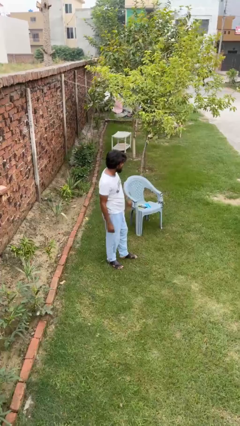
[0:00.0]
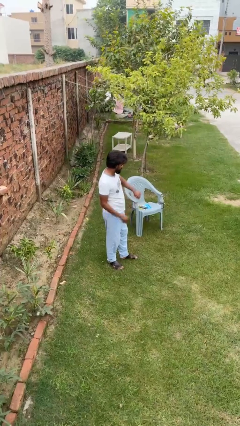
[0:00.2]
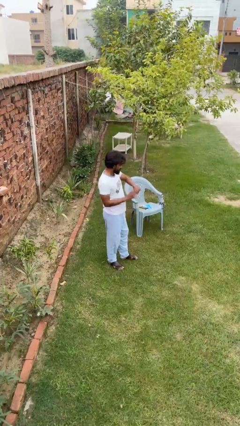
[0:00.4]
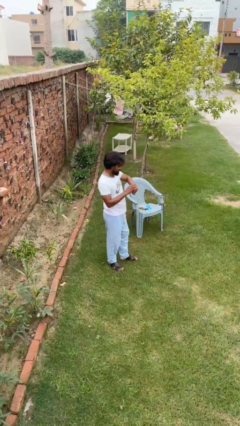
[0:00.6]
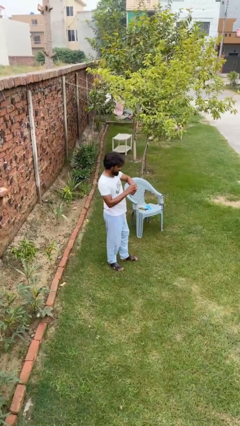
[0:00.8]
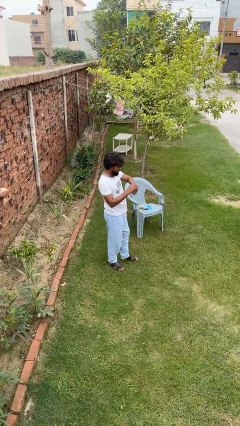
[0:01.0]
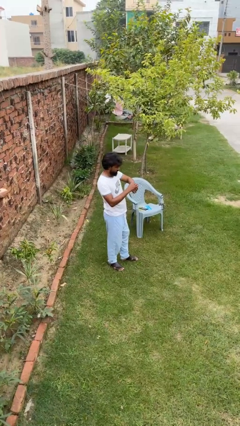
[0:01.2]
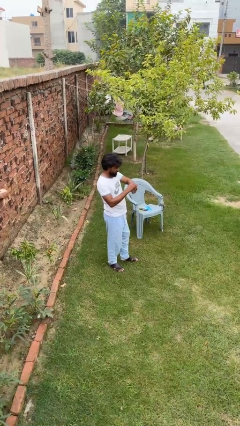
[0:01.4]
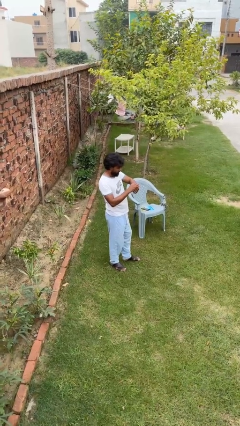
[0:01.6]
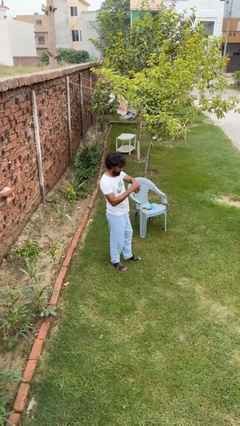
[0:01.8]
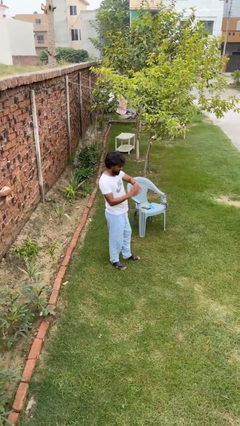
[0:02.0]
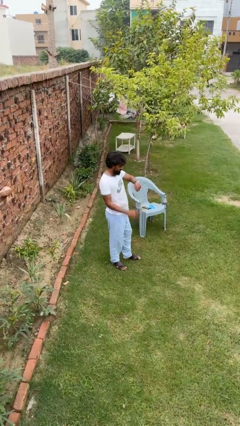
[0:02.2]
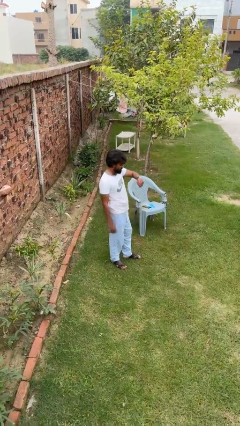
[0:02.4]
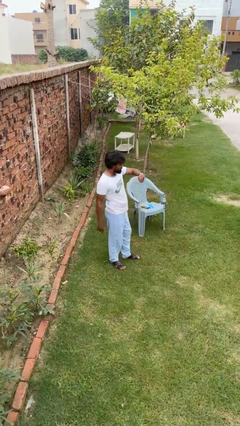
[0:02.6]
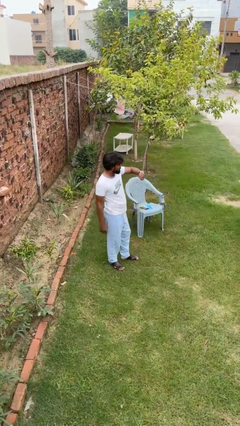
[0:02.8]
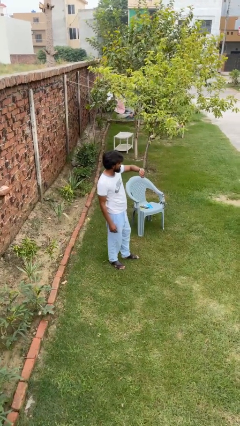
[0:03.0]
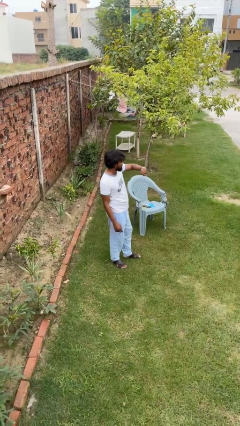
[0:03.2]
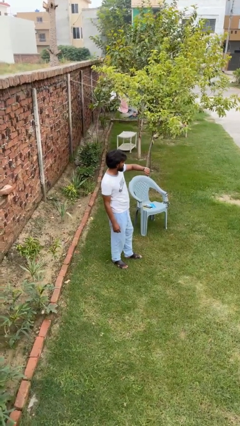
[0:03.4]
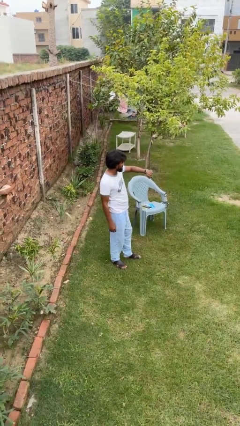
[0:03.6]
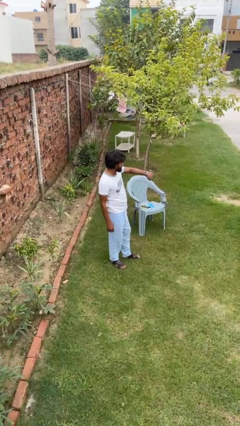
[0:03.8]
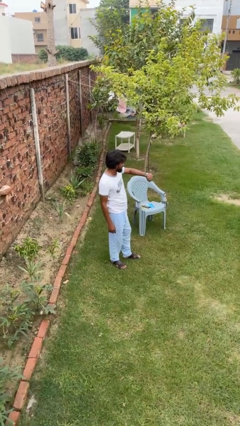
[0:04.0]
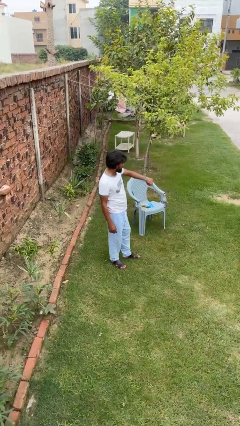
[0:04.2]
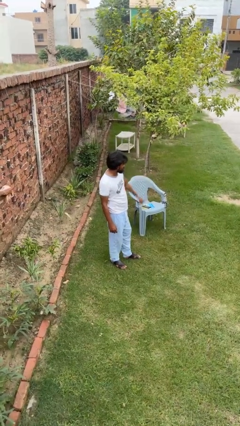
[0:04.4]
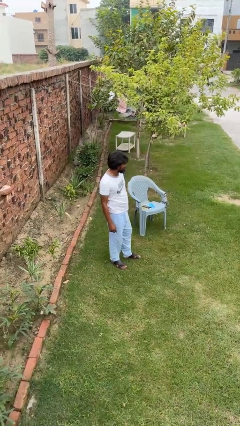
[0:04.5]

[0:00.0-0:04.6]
person looks at wristwatch

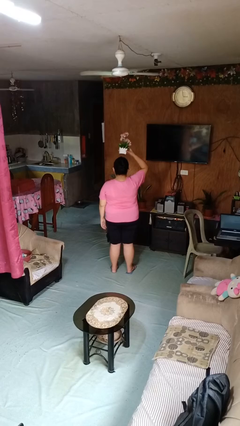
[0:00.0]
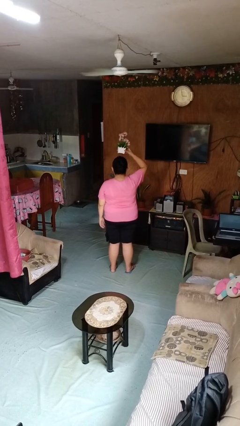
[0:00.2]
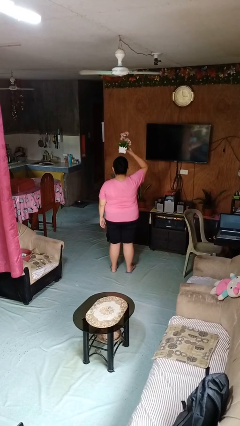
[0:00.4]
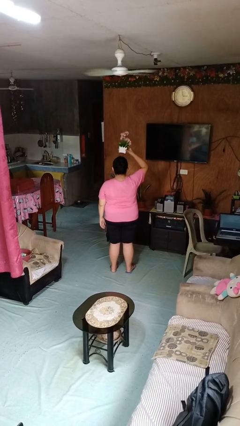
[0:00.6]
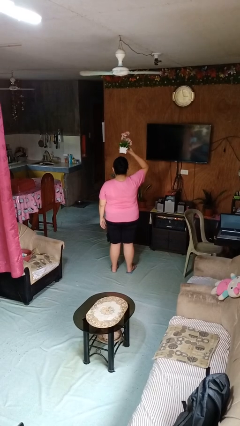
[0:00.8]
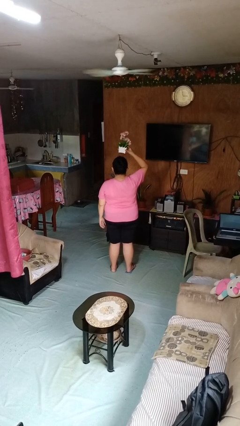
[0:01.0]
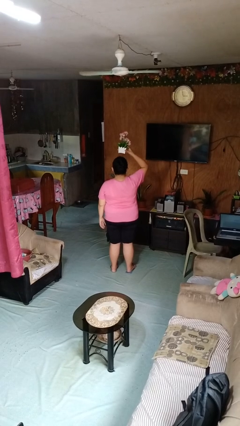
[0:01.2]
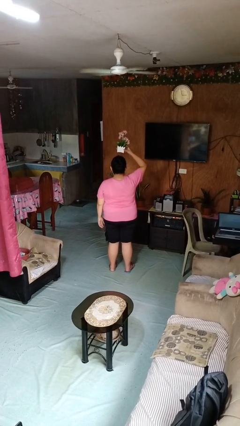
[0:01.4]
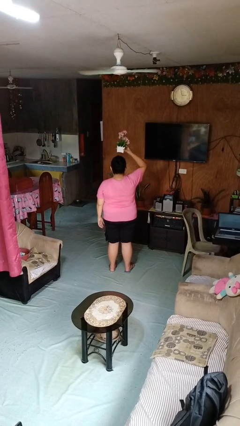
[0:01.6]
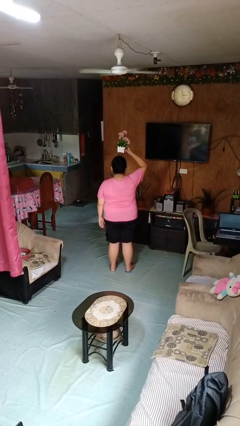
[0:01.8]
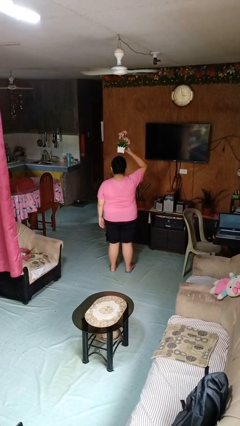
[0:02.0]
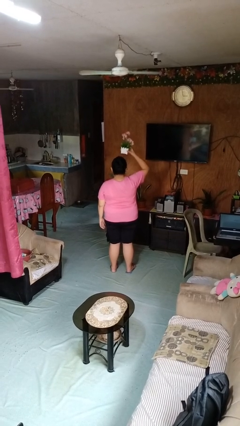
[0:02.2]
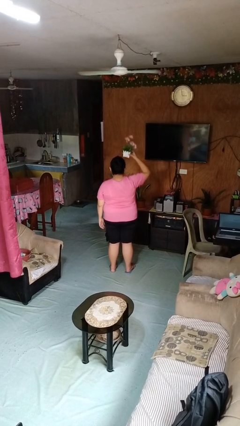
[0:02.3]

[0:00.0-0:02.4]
person holds object above head

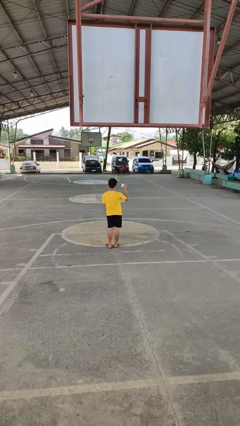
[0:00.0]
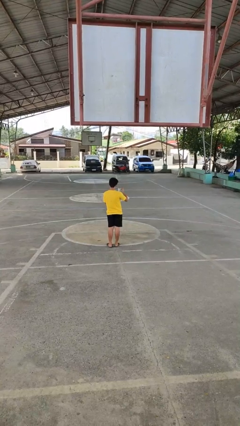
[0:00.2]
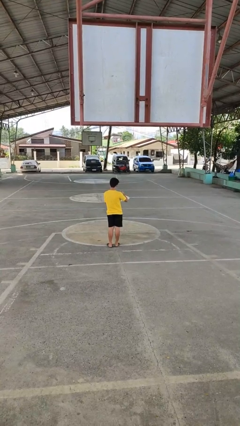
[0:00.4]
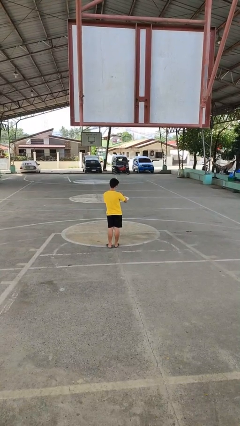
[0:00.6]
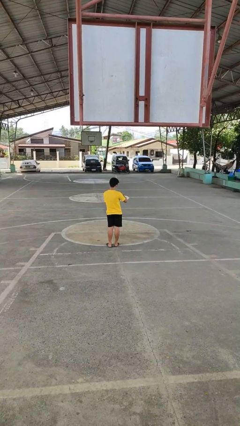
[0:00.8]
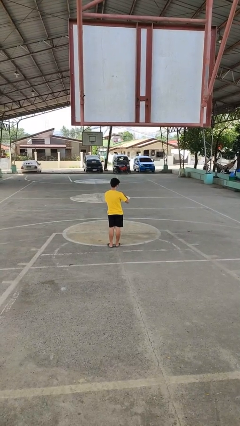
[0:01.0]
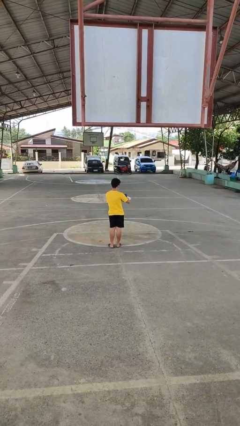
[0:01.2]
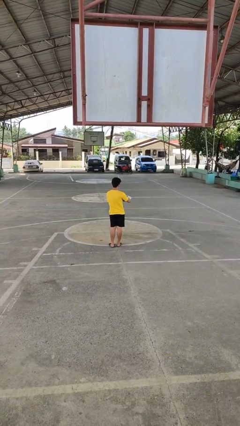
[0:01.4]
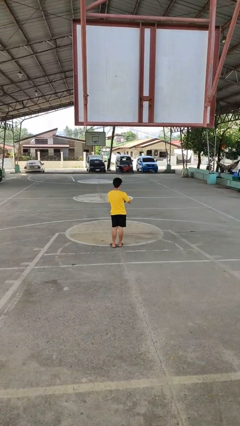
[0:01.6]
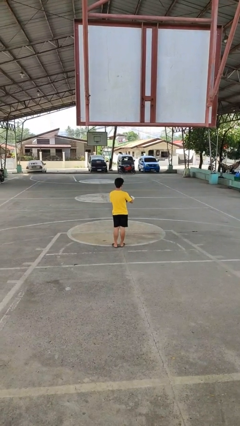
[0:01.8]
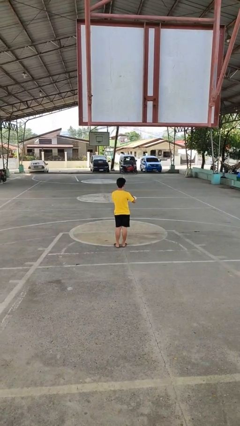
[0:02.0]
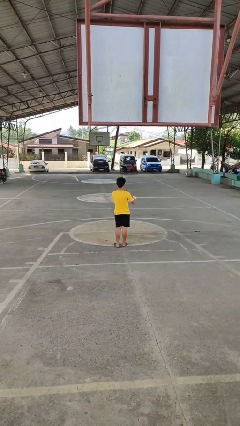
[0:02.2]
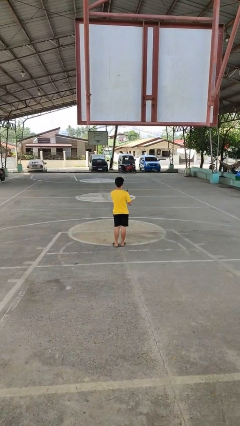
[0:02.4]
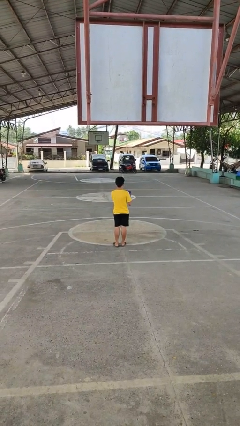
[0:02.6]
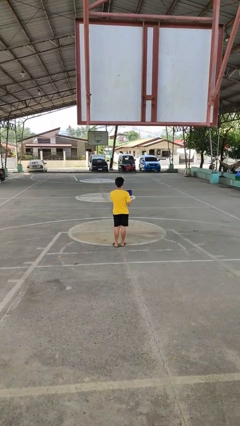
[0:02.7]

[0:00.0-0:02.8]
person puts object into purse

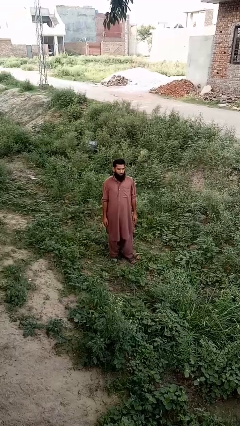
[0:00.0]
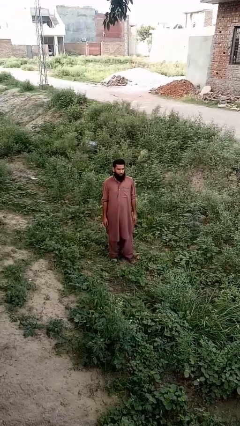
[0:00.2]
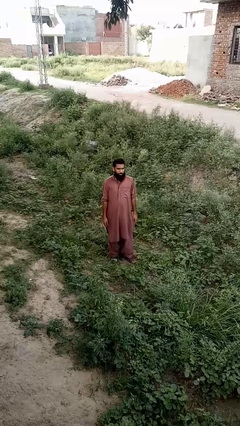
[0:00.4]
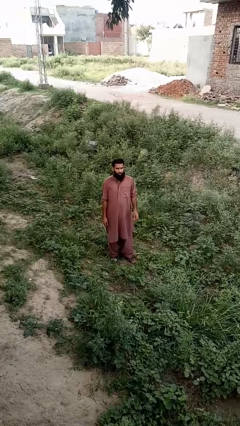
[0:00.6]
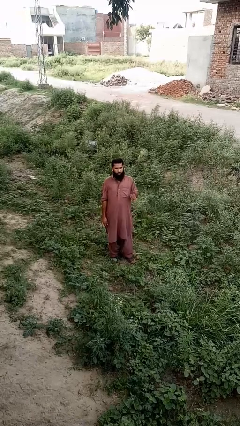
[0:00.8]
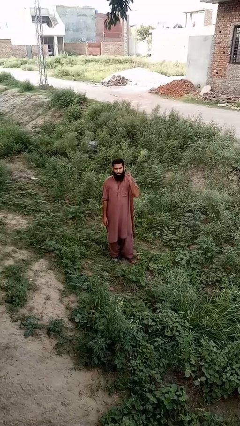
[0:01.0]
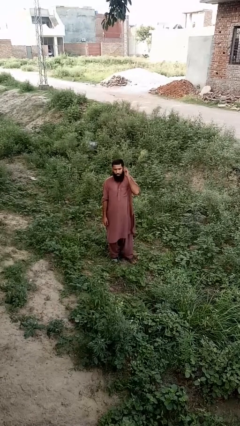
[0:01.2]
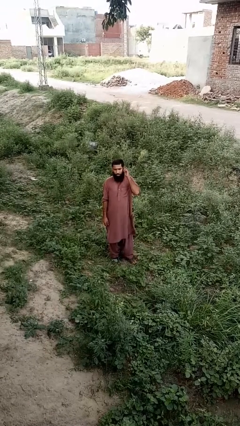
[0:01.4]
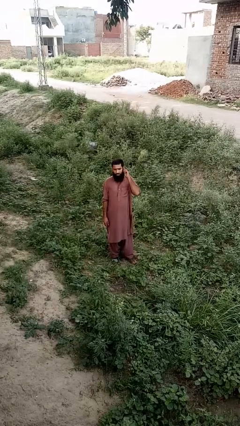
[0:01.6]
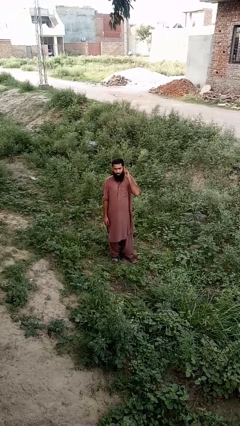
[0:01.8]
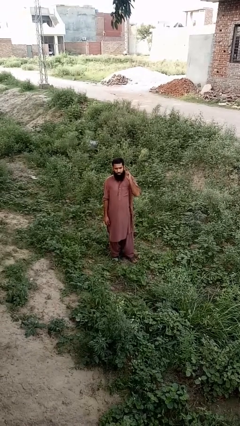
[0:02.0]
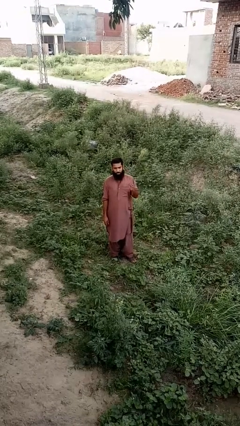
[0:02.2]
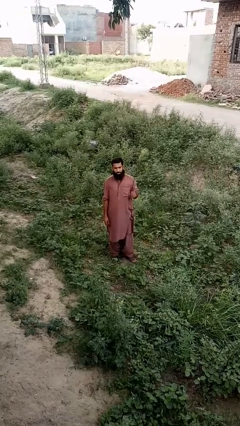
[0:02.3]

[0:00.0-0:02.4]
person touches earlobe

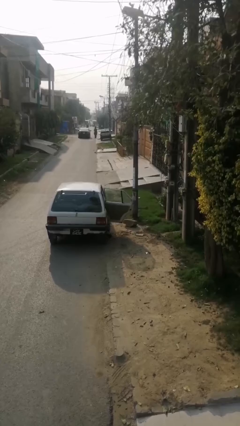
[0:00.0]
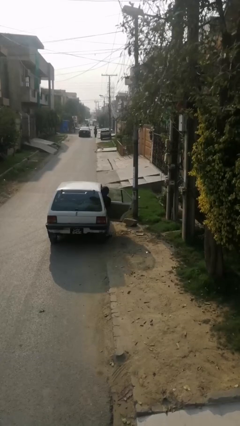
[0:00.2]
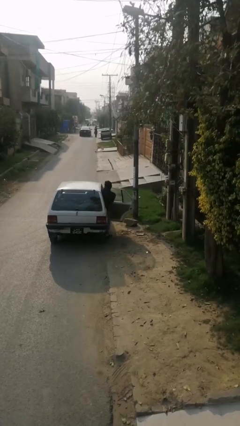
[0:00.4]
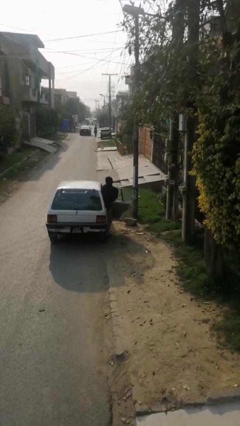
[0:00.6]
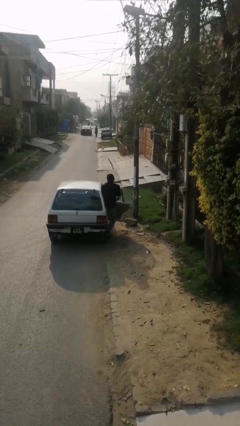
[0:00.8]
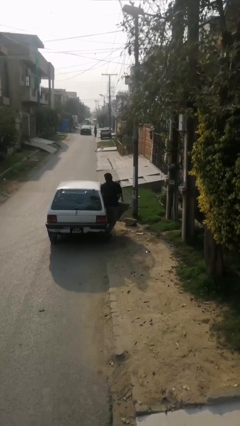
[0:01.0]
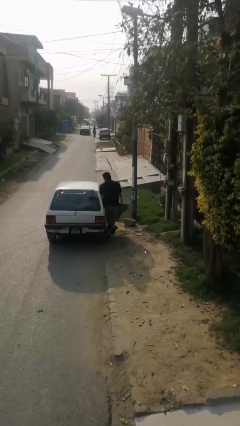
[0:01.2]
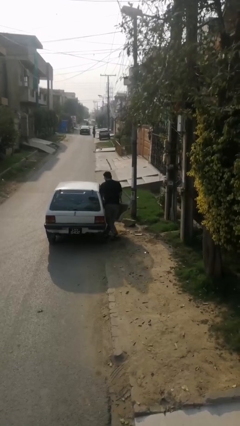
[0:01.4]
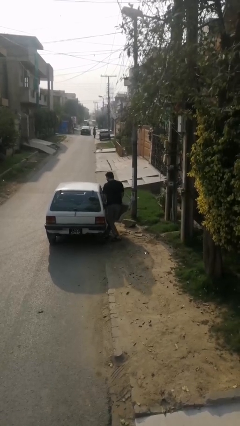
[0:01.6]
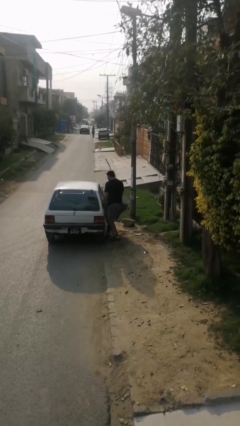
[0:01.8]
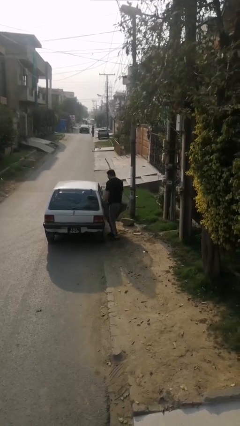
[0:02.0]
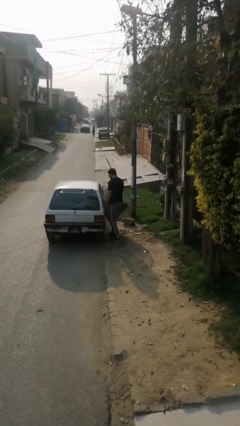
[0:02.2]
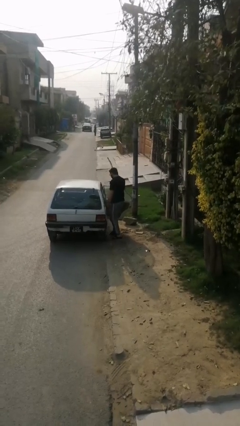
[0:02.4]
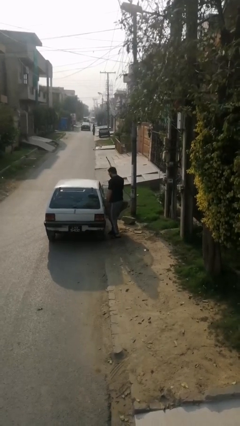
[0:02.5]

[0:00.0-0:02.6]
person exits car

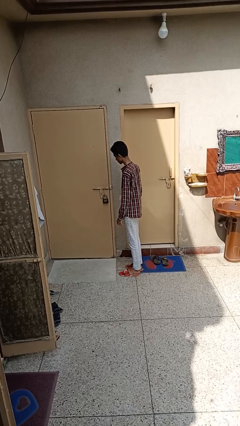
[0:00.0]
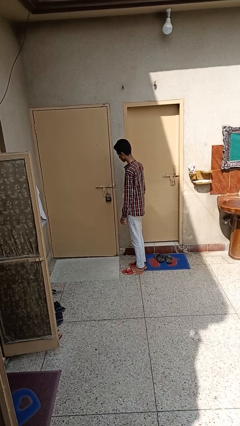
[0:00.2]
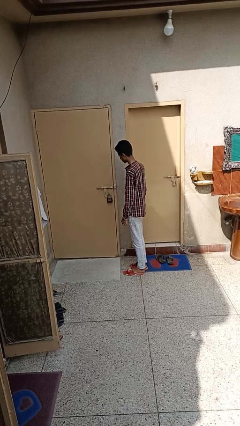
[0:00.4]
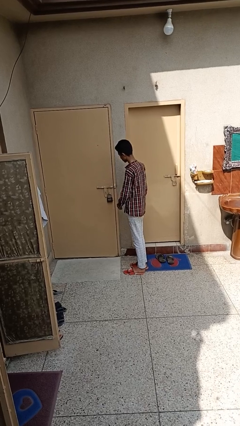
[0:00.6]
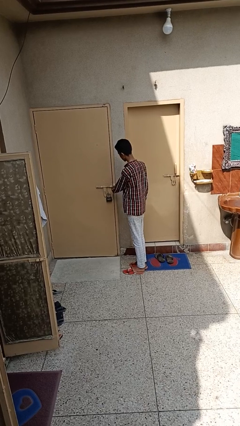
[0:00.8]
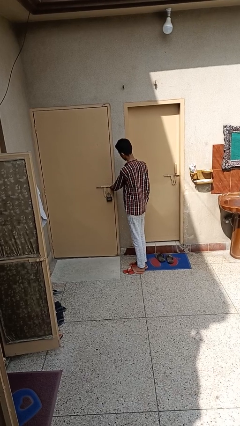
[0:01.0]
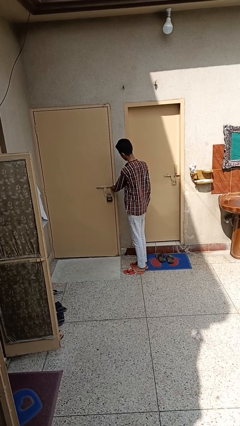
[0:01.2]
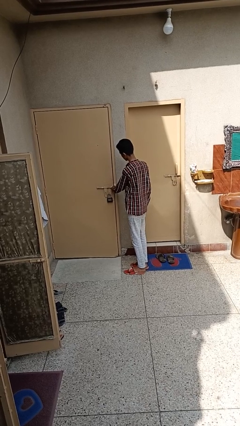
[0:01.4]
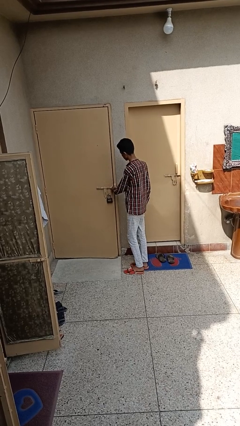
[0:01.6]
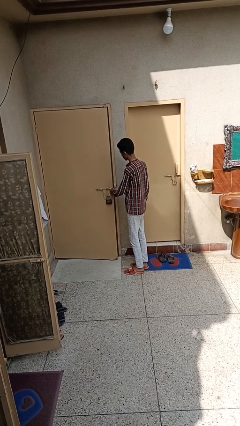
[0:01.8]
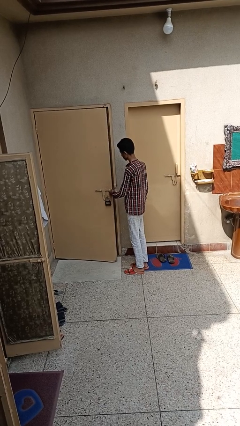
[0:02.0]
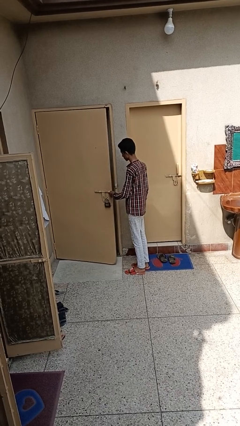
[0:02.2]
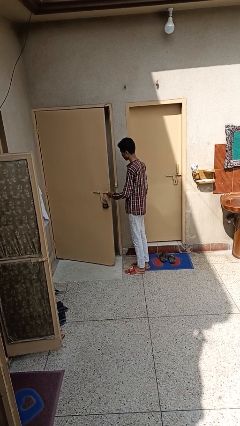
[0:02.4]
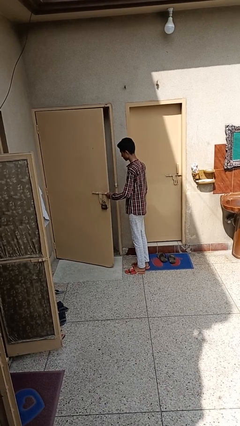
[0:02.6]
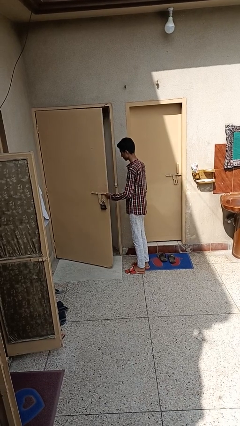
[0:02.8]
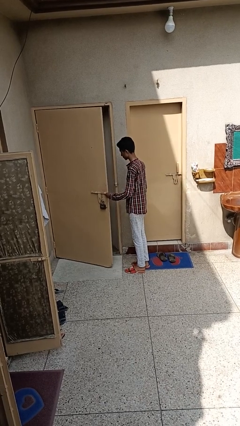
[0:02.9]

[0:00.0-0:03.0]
person opens facility door
